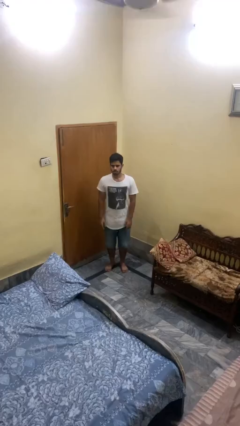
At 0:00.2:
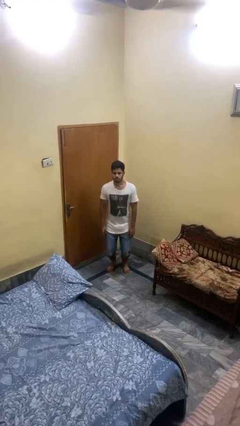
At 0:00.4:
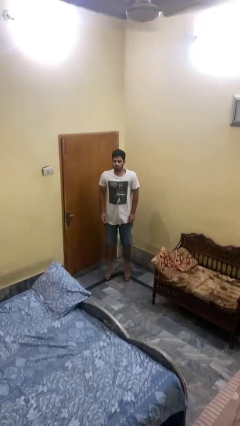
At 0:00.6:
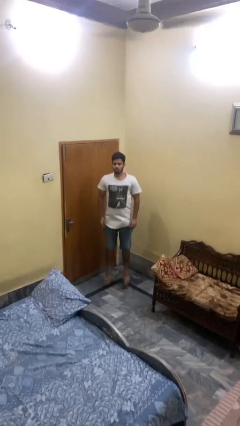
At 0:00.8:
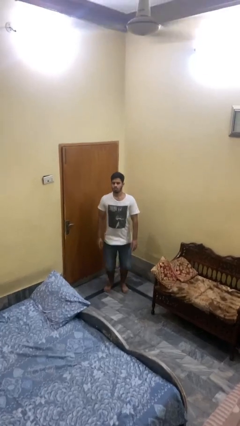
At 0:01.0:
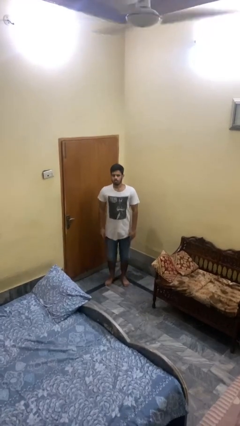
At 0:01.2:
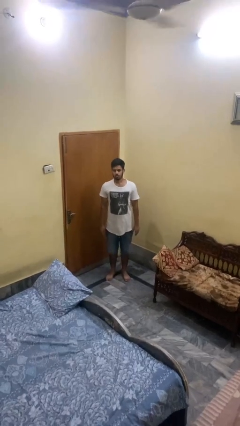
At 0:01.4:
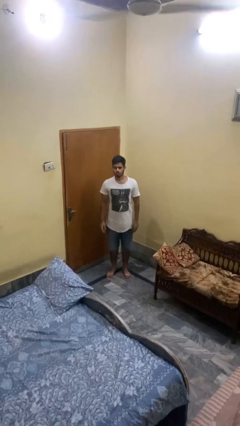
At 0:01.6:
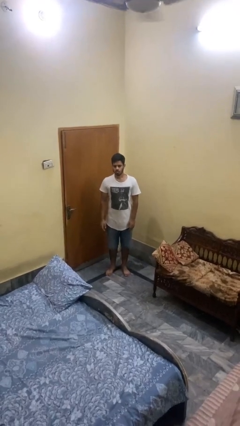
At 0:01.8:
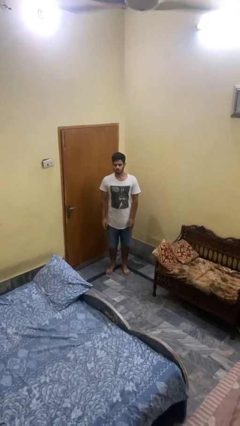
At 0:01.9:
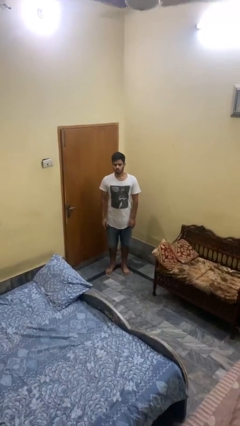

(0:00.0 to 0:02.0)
person jumps

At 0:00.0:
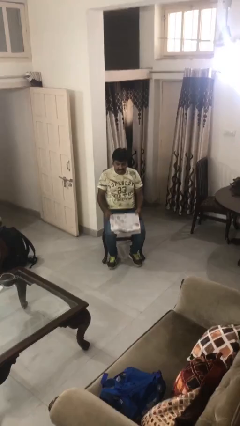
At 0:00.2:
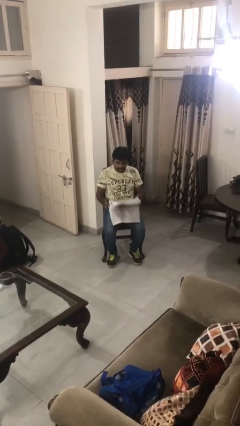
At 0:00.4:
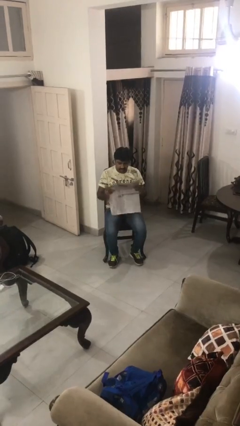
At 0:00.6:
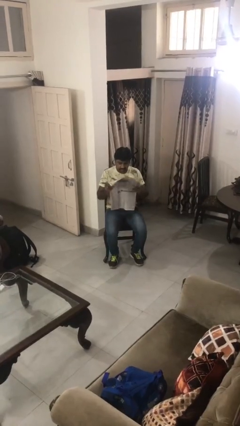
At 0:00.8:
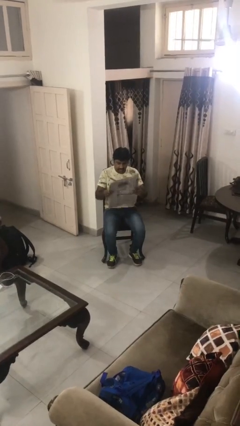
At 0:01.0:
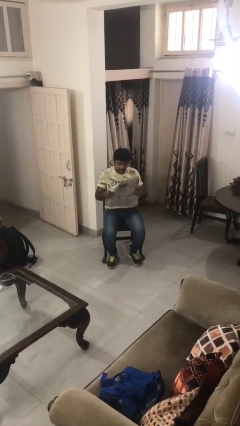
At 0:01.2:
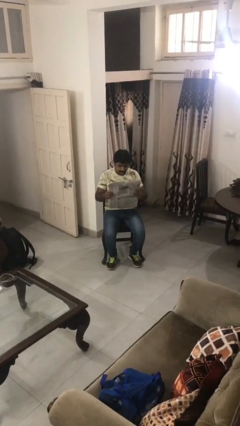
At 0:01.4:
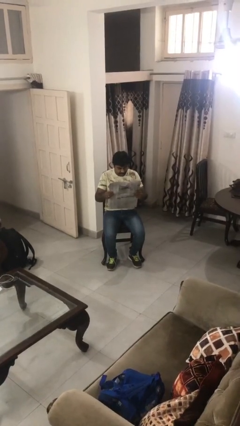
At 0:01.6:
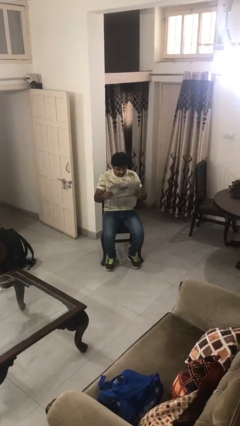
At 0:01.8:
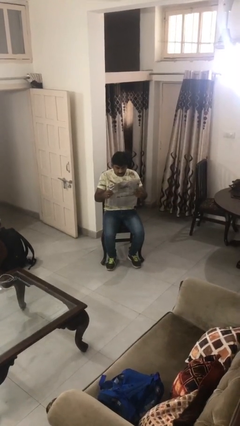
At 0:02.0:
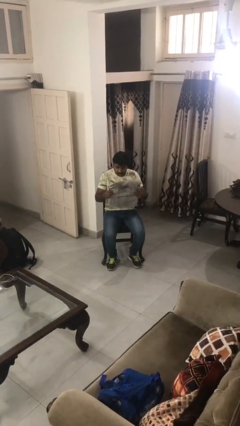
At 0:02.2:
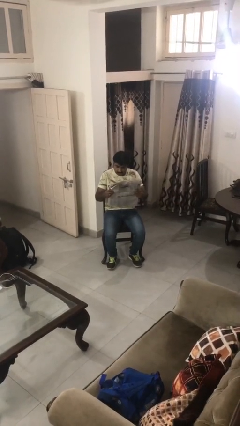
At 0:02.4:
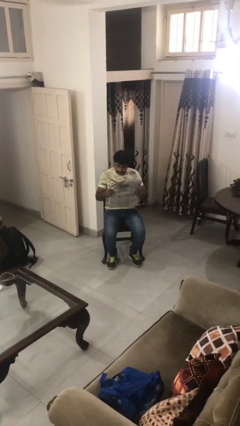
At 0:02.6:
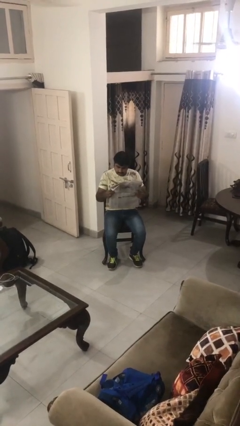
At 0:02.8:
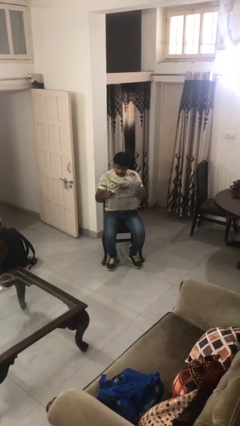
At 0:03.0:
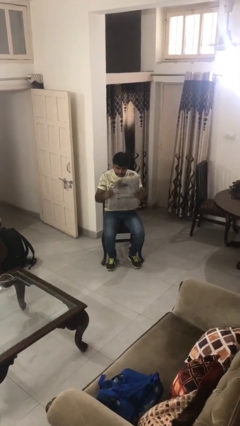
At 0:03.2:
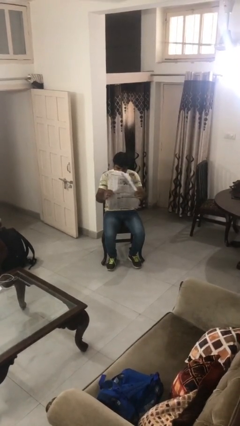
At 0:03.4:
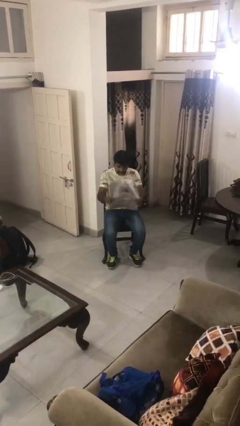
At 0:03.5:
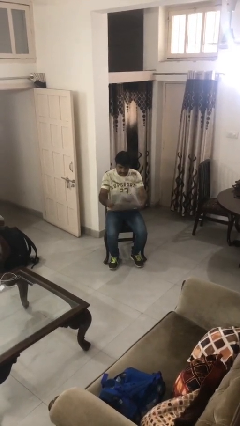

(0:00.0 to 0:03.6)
person reads newspaper

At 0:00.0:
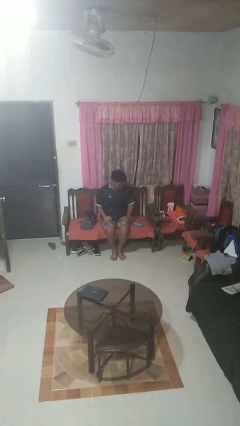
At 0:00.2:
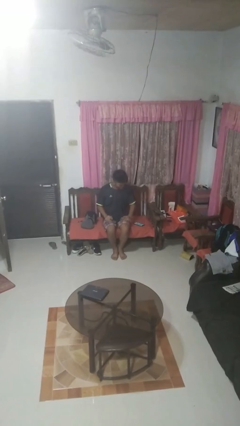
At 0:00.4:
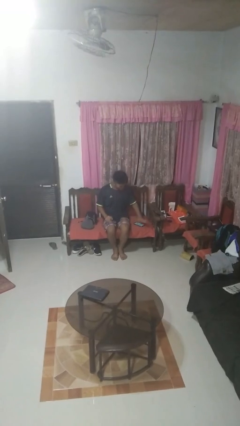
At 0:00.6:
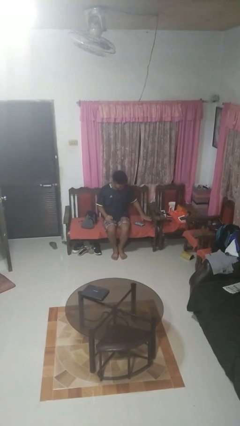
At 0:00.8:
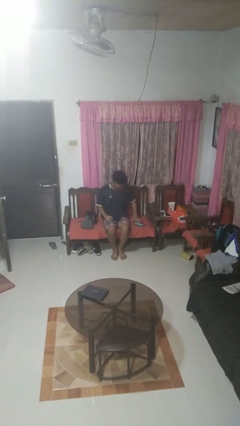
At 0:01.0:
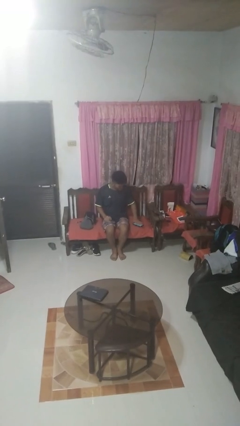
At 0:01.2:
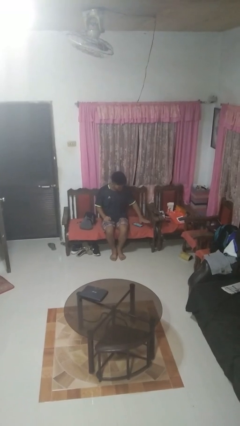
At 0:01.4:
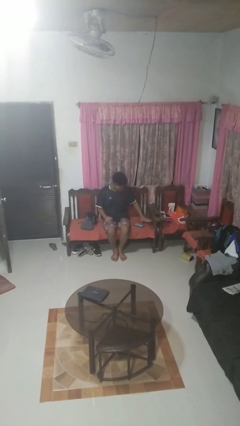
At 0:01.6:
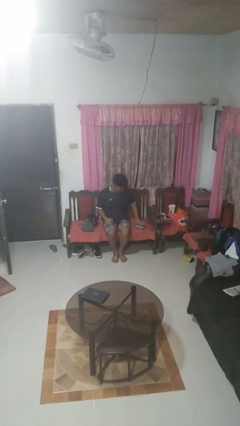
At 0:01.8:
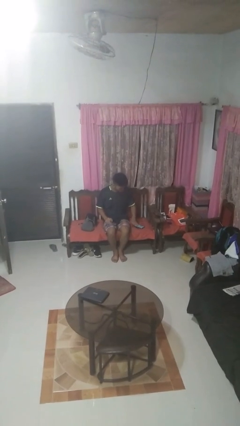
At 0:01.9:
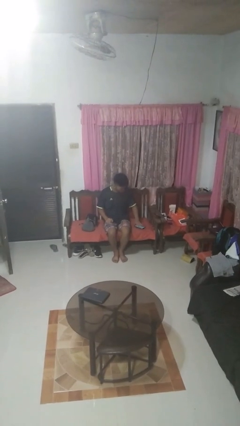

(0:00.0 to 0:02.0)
person waves hand over object

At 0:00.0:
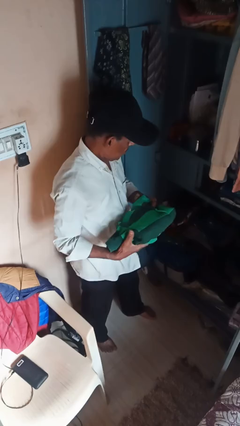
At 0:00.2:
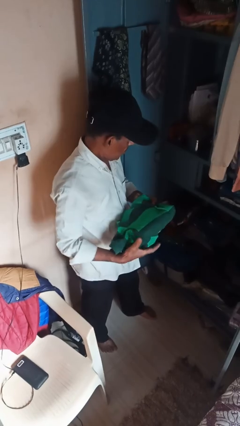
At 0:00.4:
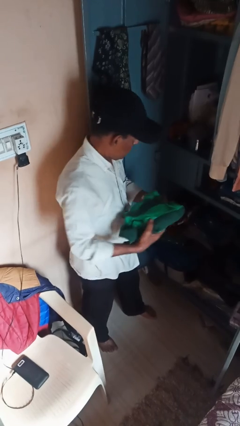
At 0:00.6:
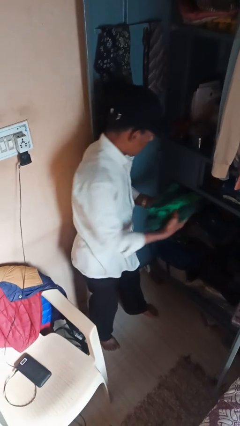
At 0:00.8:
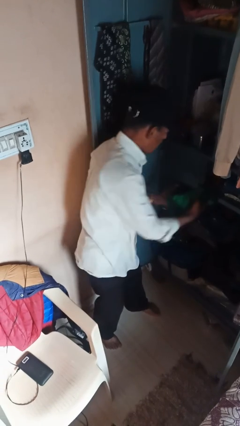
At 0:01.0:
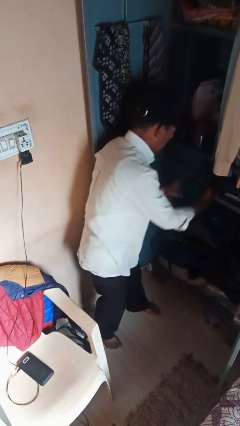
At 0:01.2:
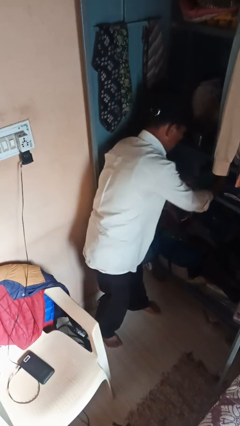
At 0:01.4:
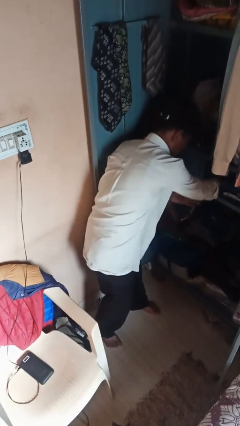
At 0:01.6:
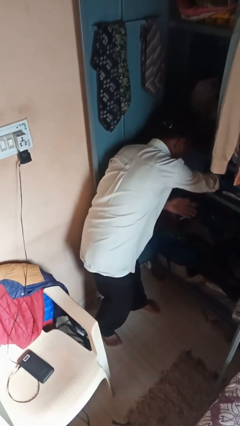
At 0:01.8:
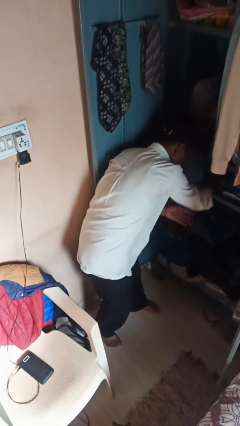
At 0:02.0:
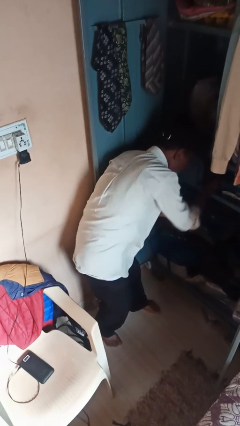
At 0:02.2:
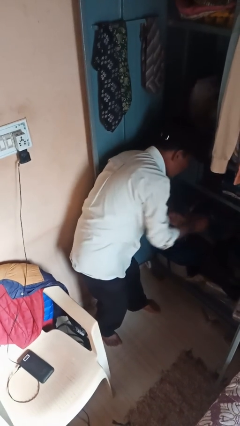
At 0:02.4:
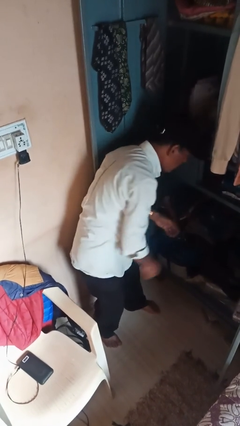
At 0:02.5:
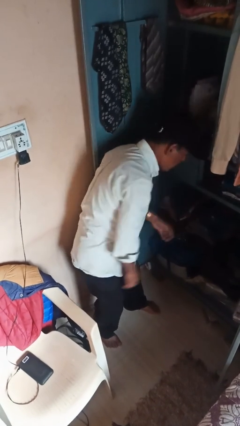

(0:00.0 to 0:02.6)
person puts clothes into dresser

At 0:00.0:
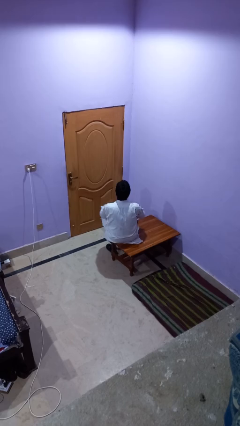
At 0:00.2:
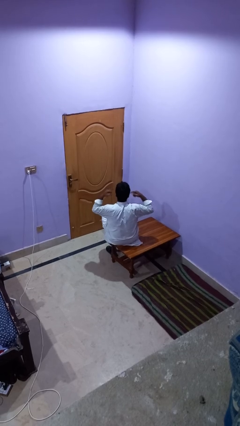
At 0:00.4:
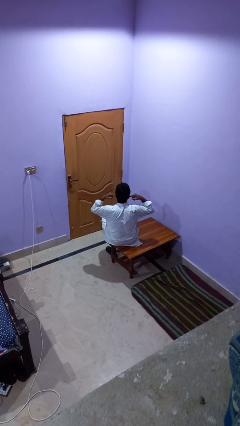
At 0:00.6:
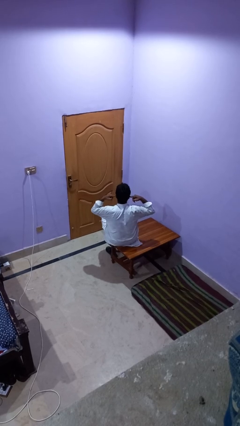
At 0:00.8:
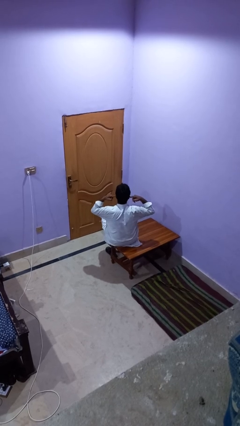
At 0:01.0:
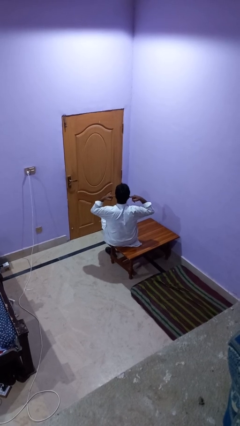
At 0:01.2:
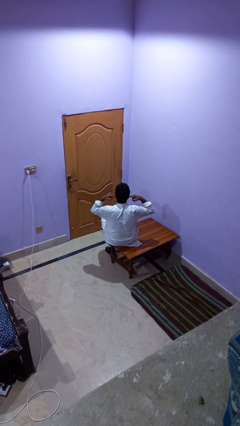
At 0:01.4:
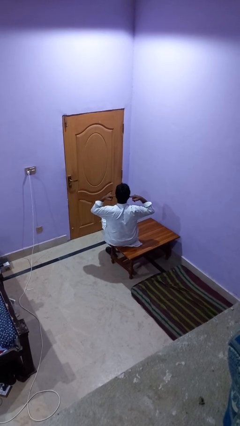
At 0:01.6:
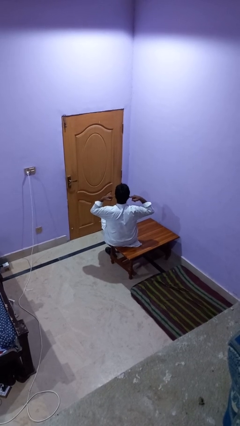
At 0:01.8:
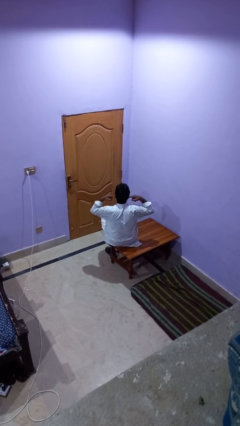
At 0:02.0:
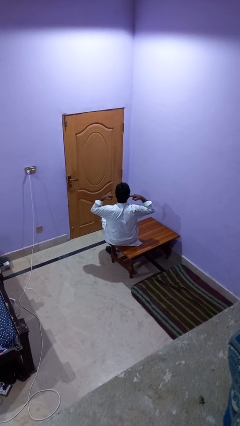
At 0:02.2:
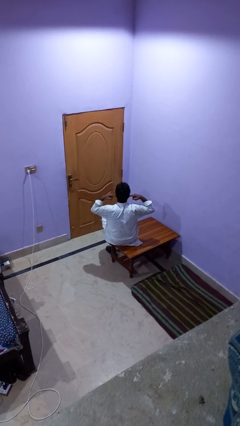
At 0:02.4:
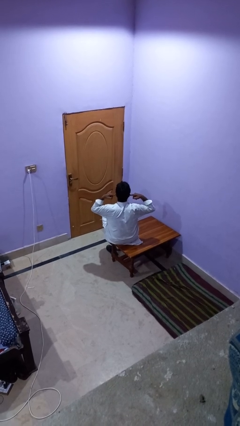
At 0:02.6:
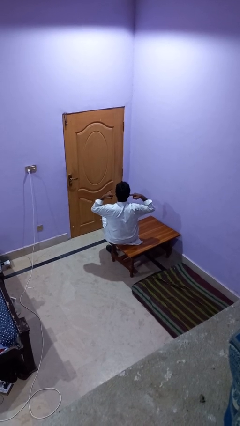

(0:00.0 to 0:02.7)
person puts fingers in ear

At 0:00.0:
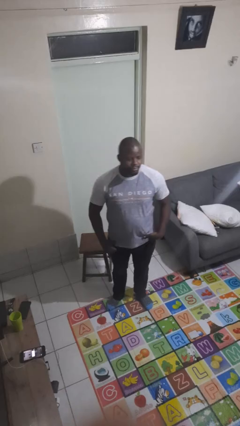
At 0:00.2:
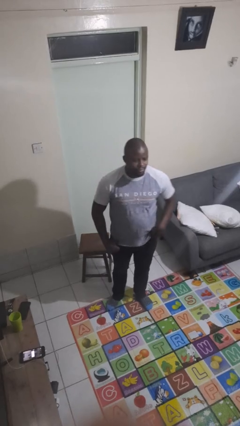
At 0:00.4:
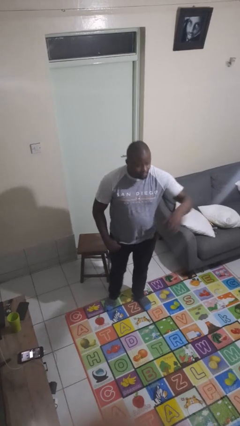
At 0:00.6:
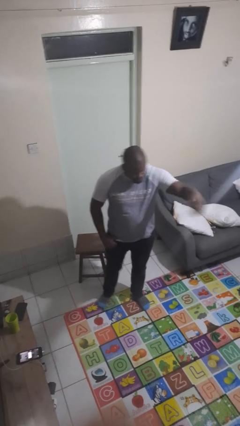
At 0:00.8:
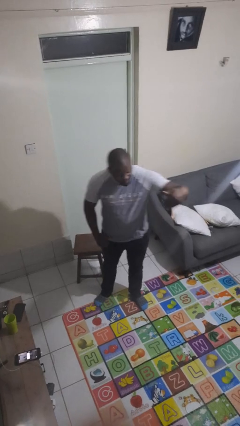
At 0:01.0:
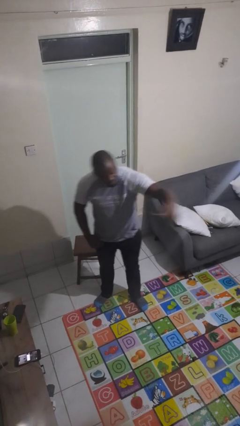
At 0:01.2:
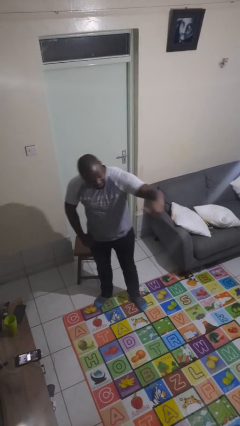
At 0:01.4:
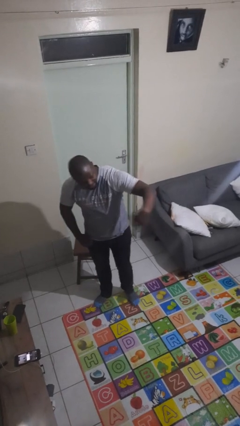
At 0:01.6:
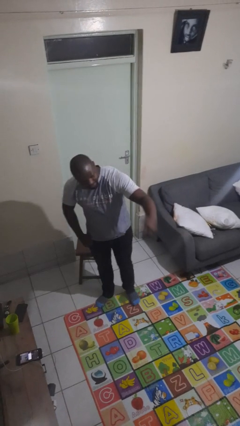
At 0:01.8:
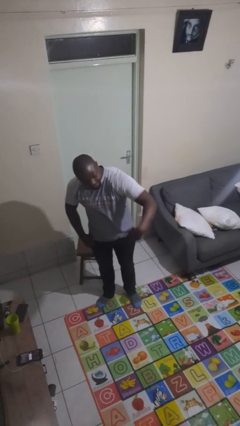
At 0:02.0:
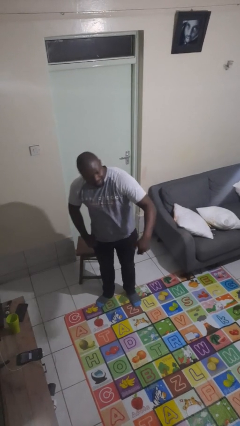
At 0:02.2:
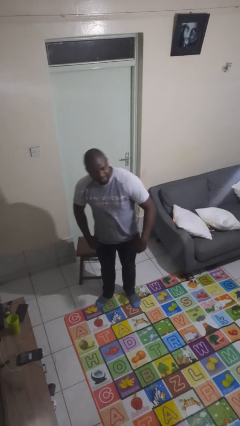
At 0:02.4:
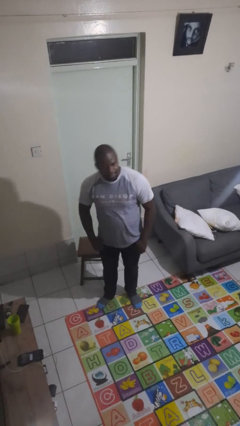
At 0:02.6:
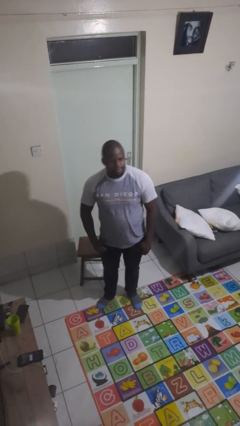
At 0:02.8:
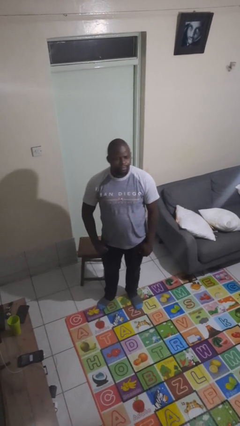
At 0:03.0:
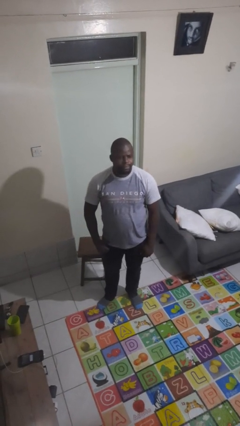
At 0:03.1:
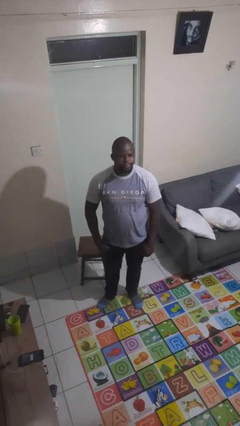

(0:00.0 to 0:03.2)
person gestures come here

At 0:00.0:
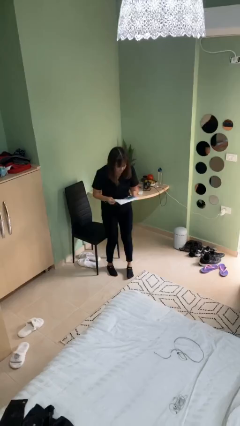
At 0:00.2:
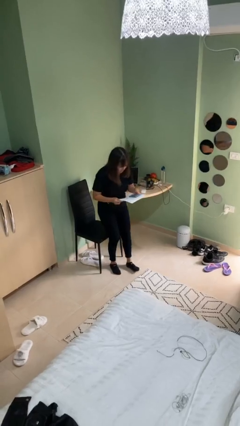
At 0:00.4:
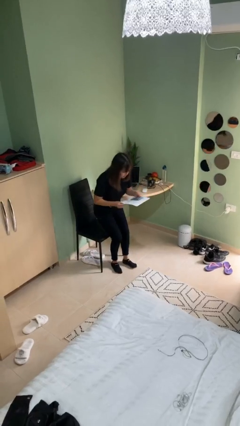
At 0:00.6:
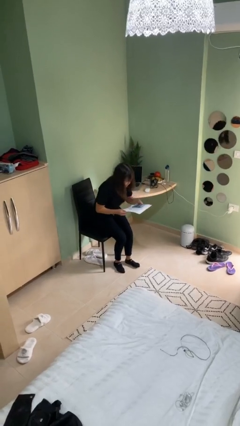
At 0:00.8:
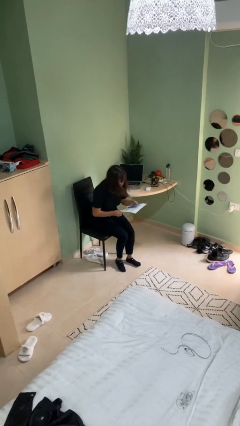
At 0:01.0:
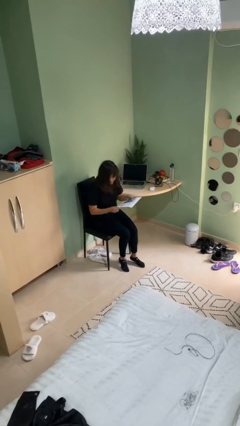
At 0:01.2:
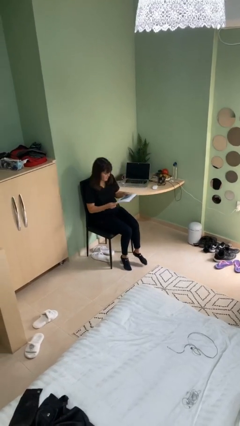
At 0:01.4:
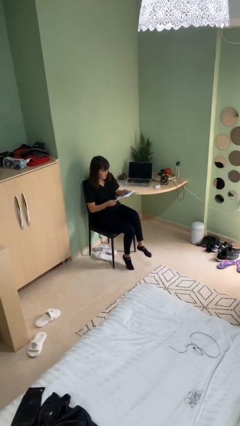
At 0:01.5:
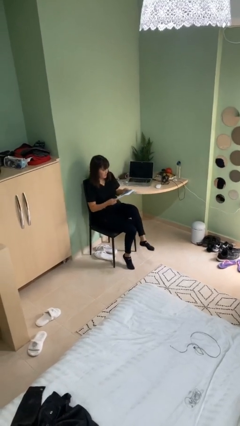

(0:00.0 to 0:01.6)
person sits down
